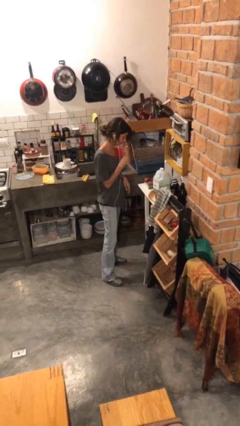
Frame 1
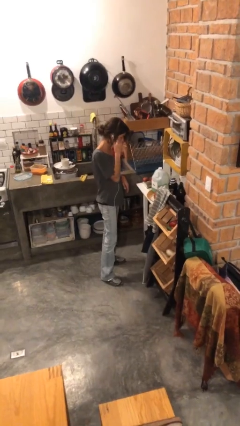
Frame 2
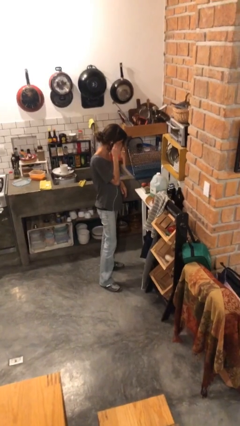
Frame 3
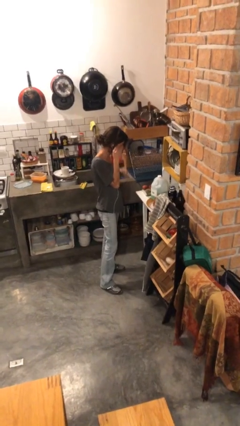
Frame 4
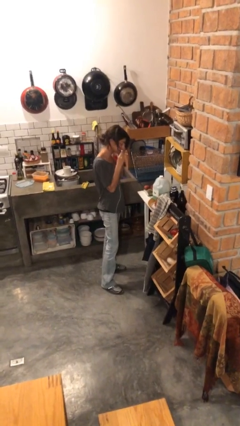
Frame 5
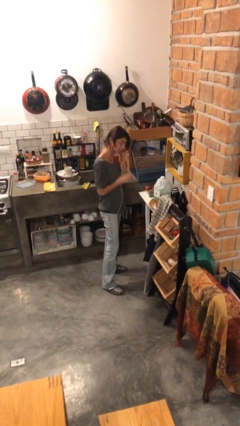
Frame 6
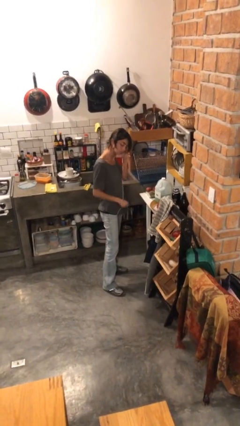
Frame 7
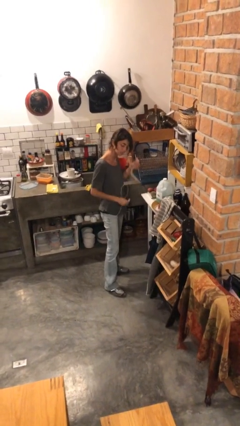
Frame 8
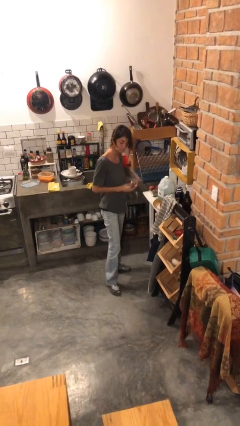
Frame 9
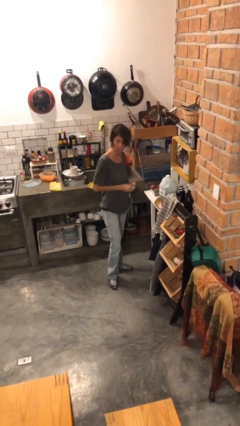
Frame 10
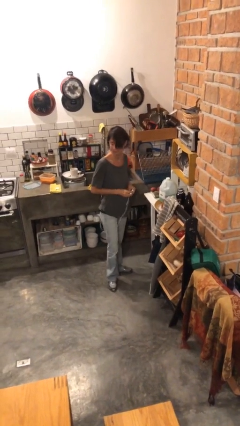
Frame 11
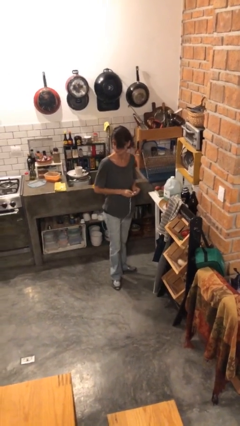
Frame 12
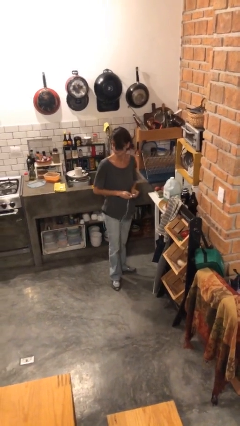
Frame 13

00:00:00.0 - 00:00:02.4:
person takes off headphones

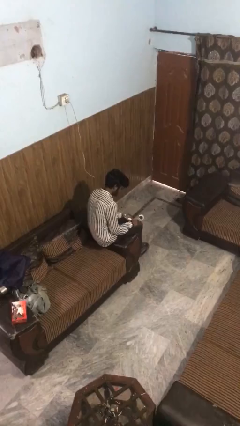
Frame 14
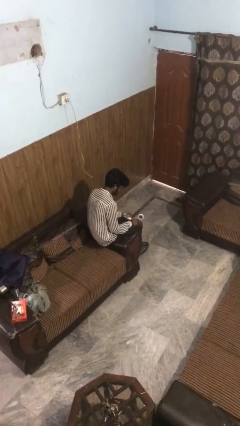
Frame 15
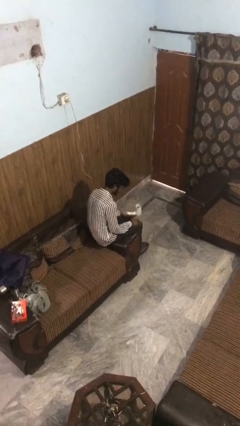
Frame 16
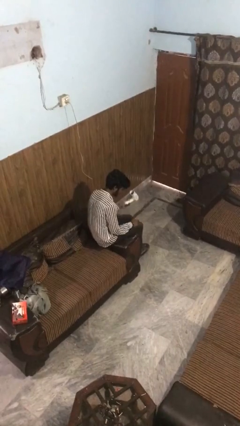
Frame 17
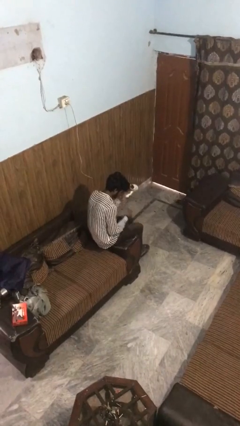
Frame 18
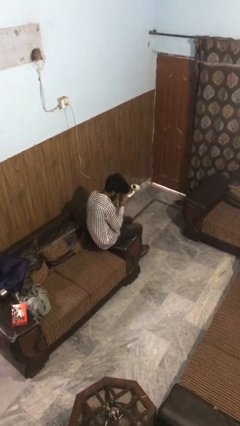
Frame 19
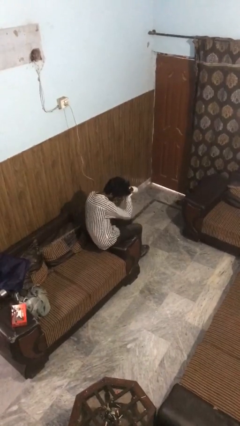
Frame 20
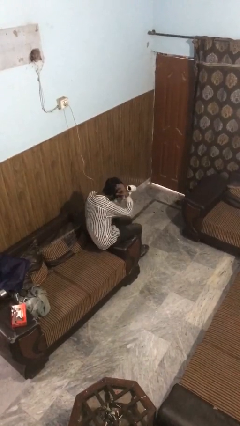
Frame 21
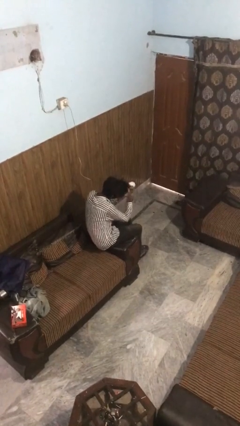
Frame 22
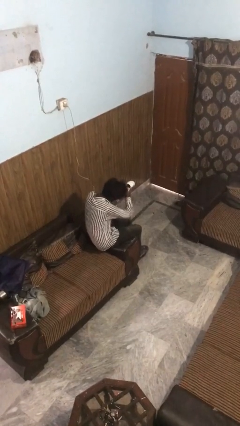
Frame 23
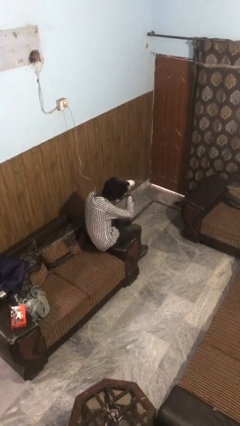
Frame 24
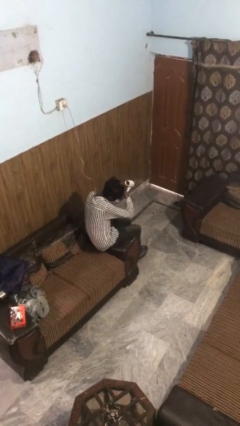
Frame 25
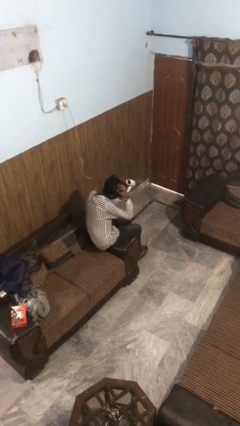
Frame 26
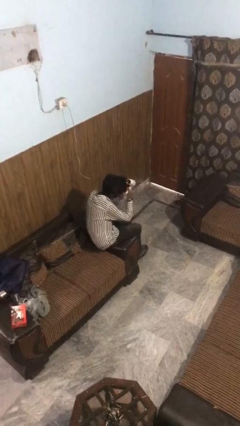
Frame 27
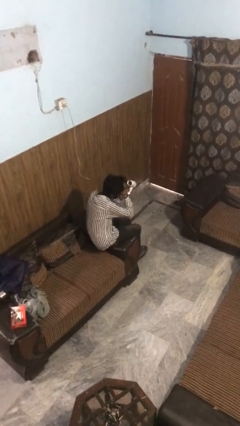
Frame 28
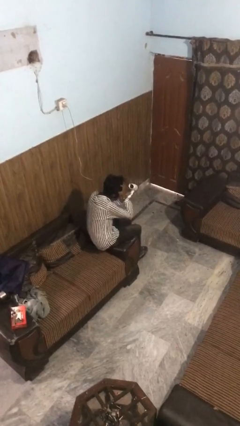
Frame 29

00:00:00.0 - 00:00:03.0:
person dries hair with hairdryer

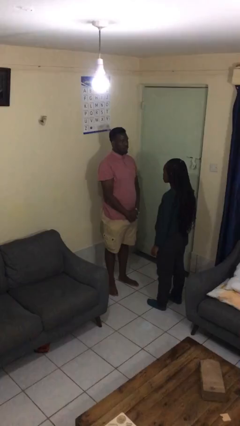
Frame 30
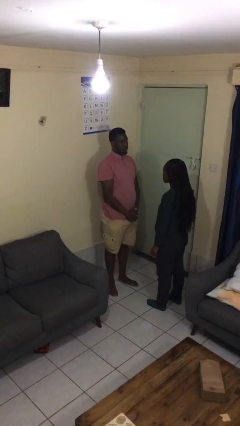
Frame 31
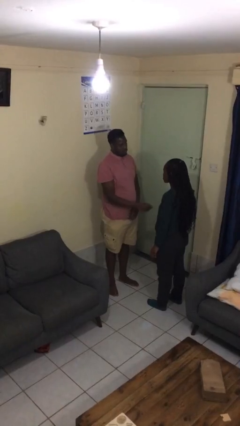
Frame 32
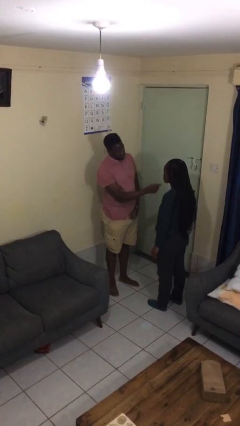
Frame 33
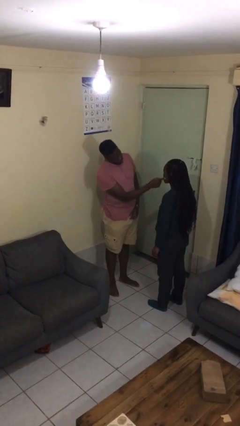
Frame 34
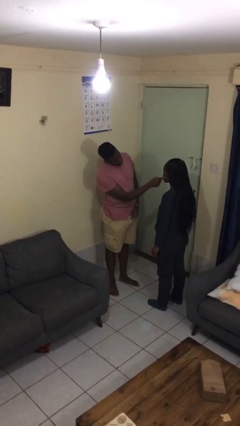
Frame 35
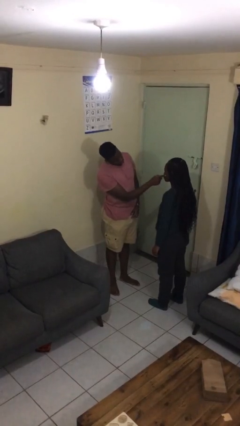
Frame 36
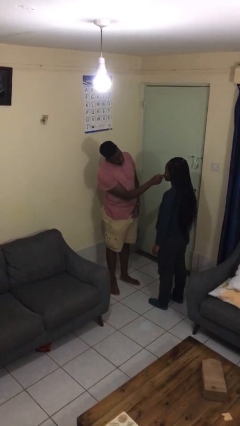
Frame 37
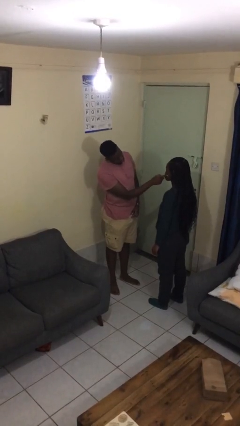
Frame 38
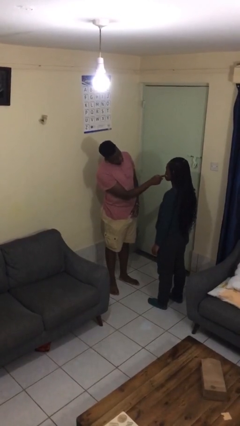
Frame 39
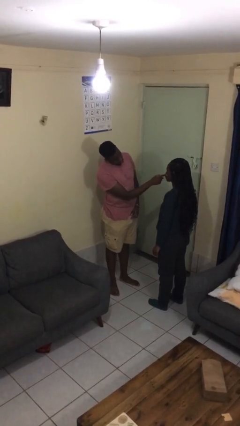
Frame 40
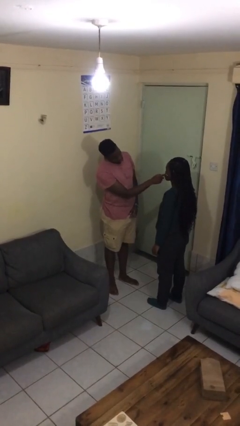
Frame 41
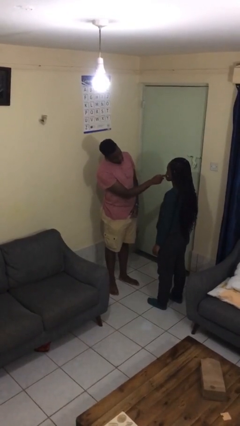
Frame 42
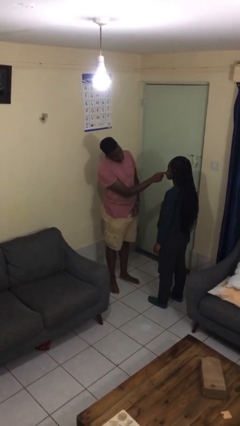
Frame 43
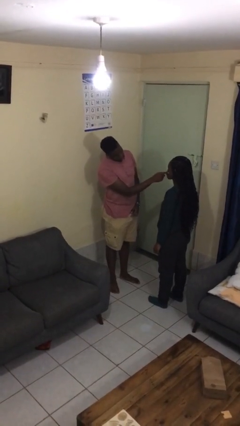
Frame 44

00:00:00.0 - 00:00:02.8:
person touches face of person

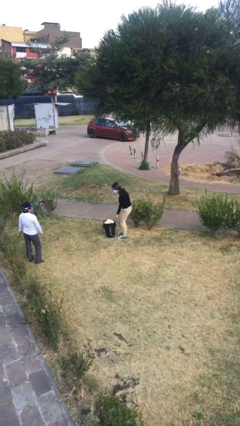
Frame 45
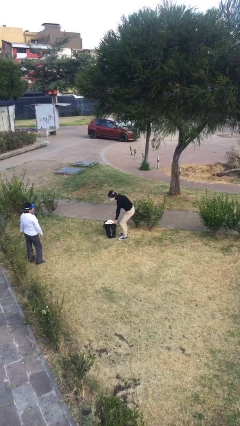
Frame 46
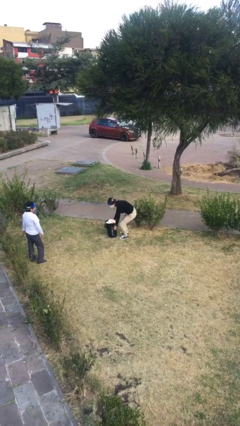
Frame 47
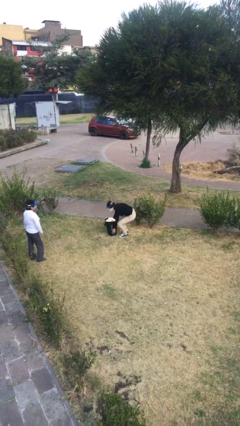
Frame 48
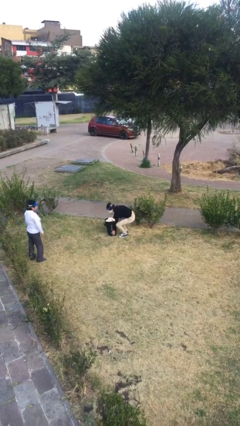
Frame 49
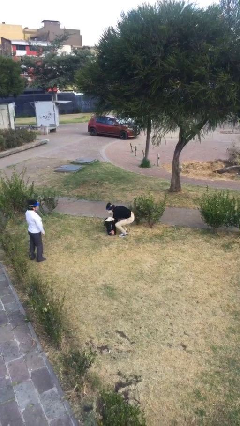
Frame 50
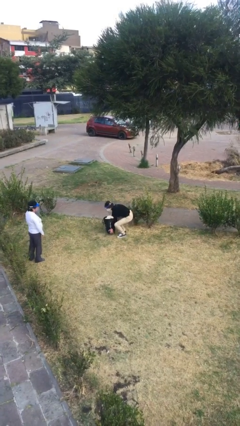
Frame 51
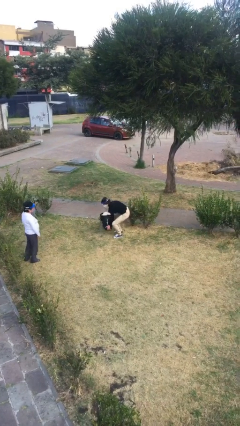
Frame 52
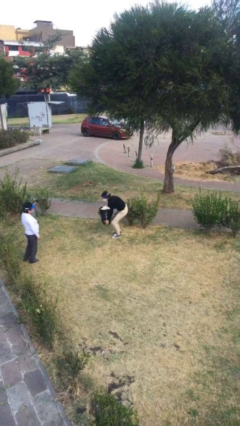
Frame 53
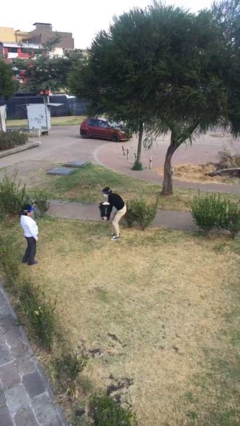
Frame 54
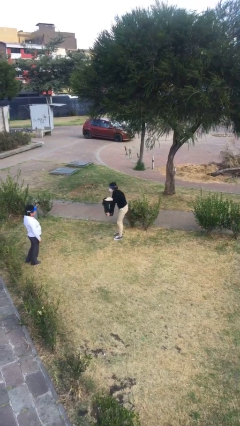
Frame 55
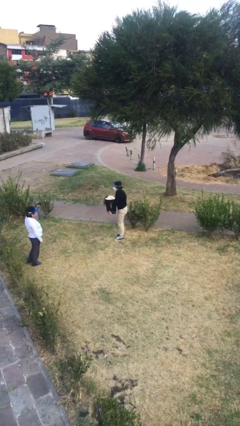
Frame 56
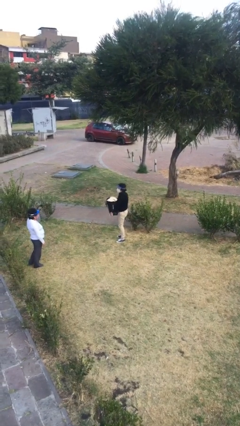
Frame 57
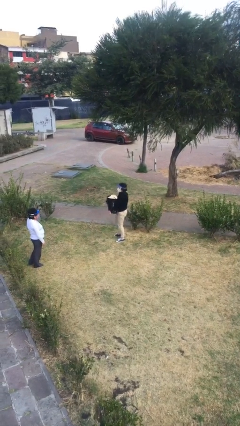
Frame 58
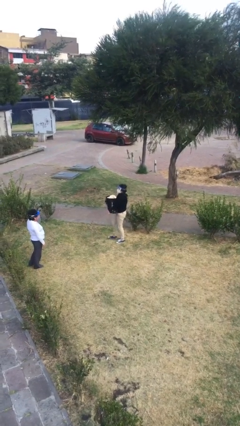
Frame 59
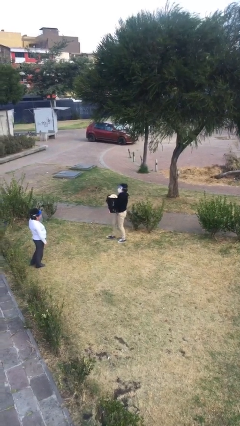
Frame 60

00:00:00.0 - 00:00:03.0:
person picks up object from floor

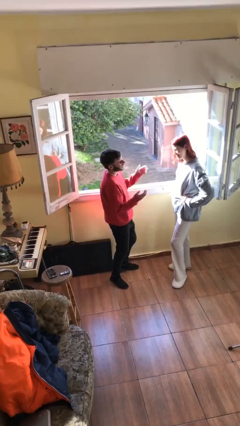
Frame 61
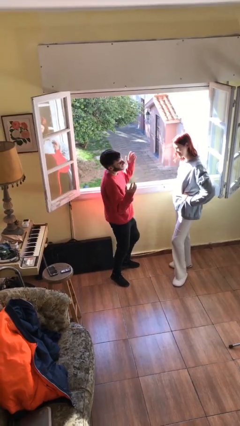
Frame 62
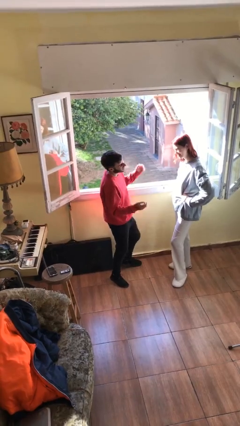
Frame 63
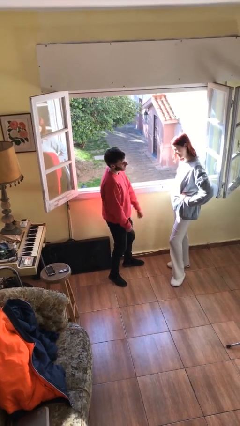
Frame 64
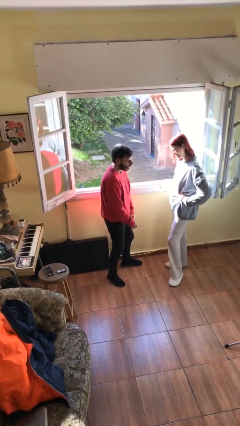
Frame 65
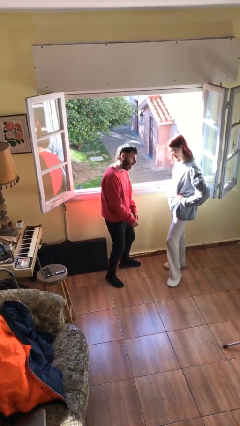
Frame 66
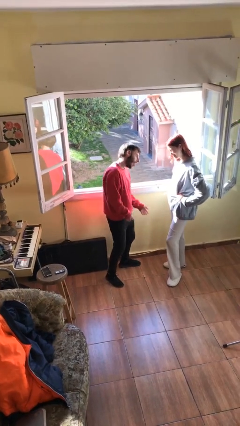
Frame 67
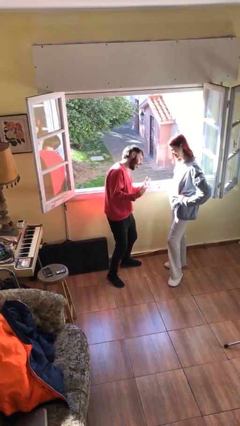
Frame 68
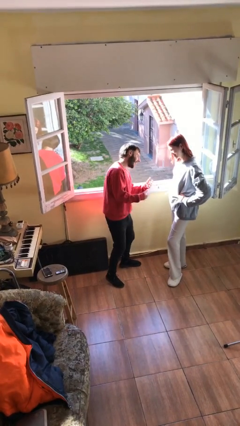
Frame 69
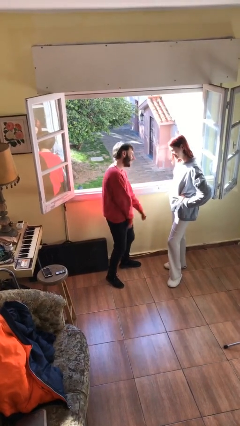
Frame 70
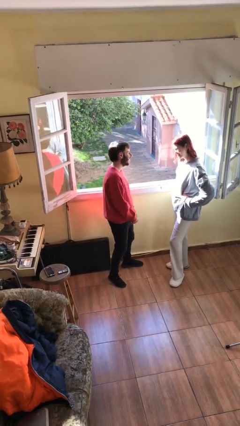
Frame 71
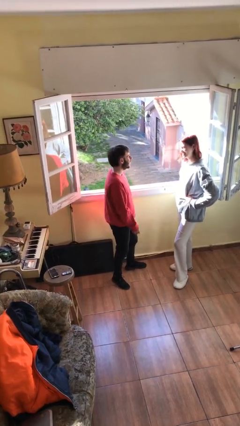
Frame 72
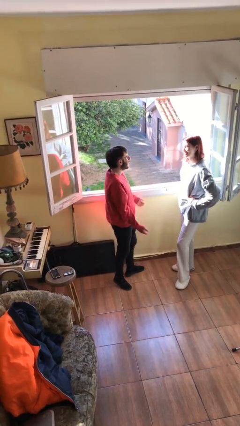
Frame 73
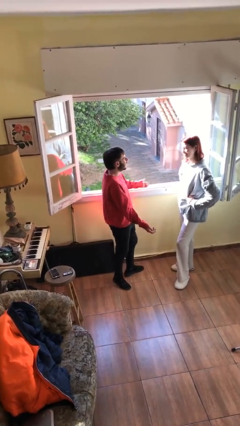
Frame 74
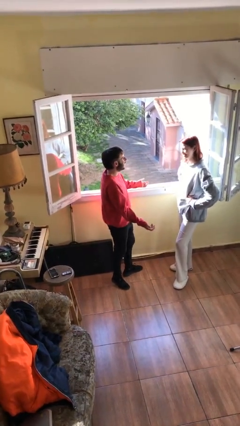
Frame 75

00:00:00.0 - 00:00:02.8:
person laughs with person

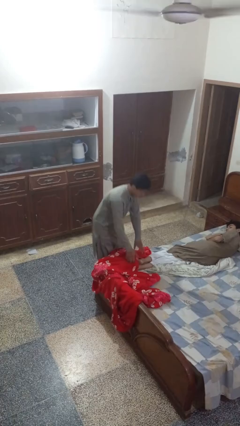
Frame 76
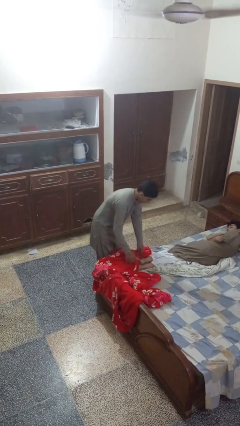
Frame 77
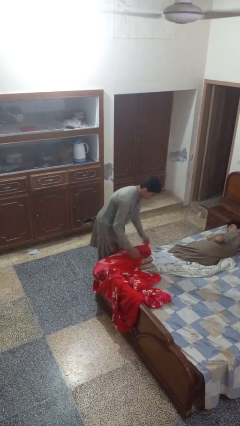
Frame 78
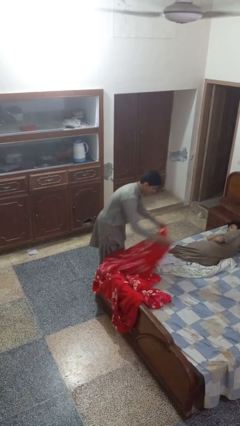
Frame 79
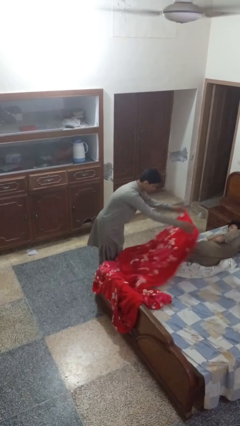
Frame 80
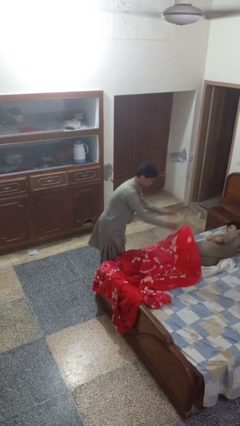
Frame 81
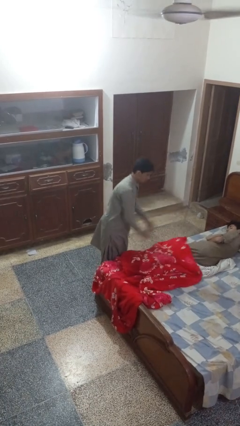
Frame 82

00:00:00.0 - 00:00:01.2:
person covers friend with blanket

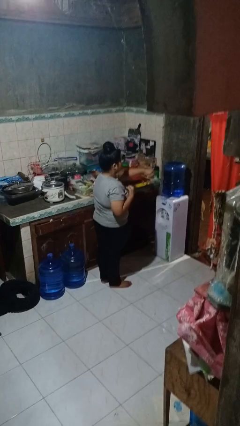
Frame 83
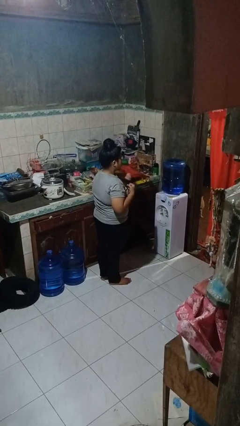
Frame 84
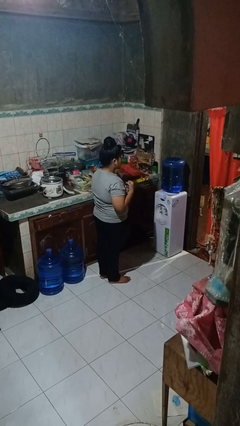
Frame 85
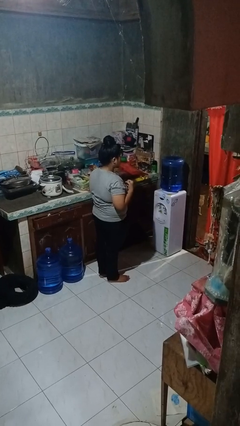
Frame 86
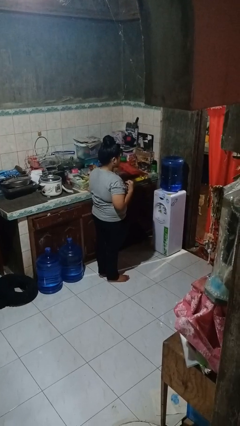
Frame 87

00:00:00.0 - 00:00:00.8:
person punches

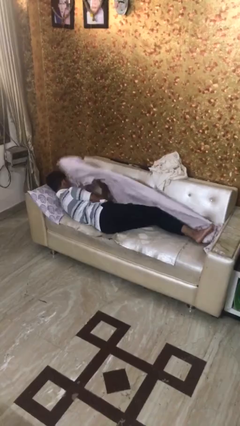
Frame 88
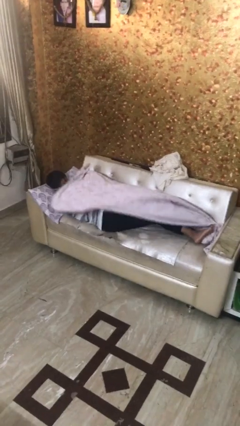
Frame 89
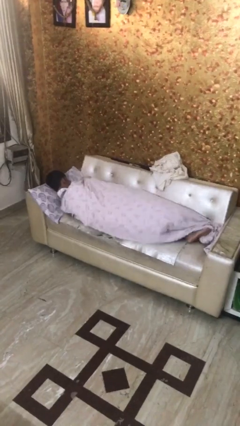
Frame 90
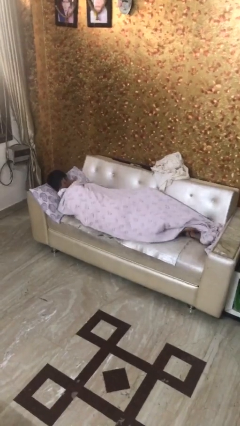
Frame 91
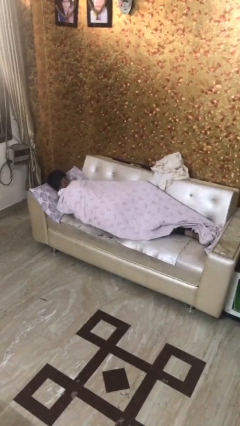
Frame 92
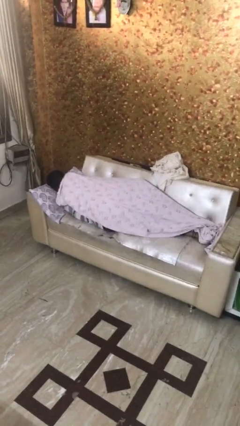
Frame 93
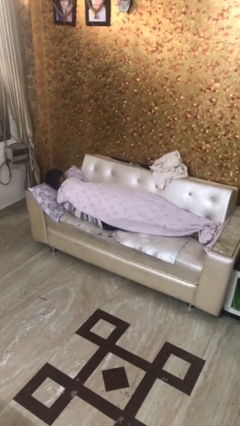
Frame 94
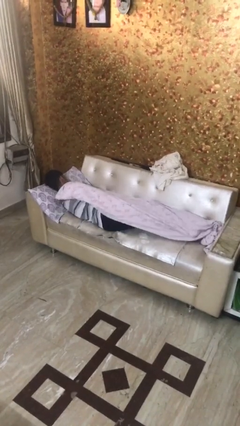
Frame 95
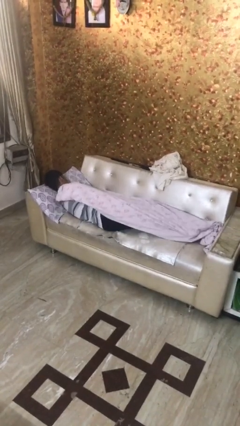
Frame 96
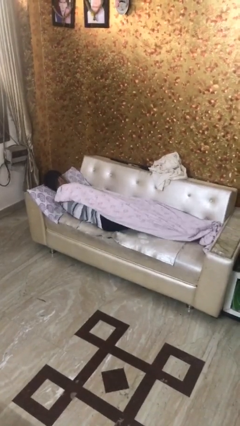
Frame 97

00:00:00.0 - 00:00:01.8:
person covers with bedsheets
